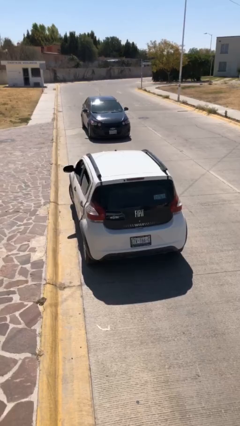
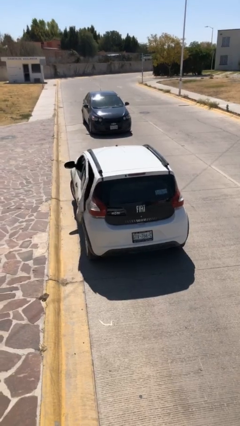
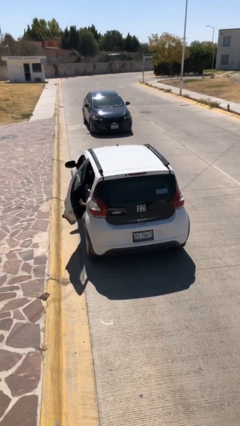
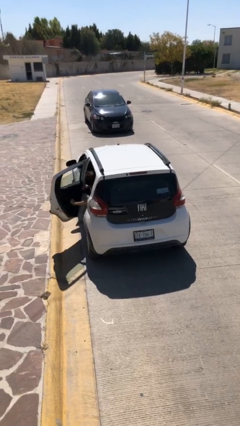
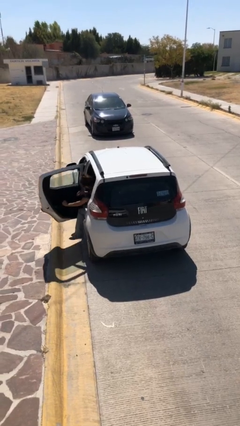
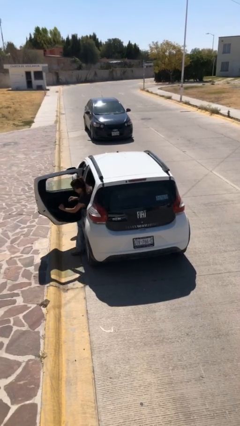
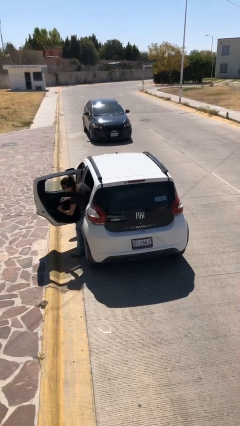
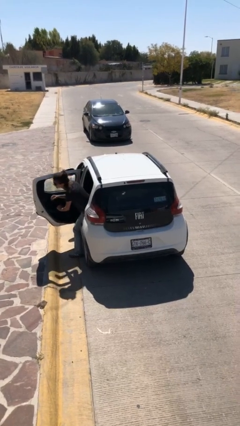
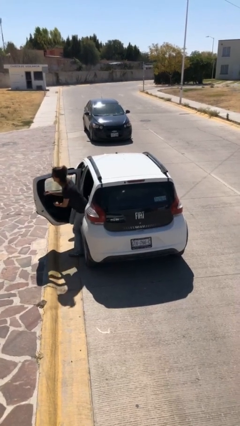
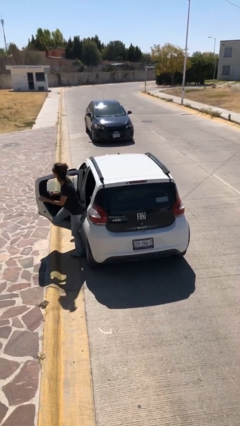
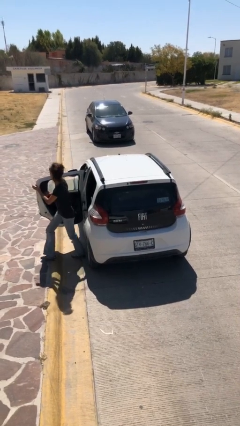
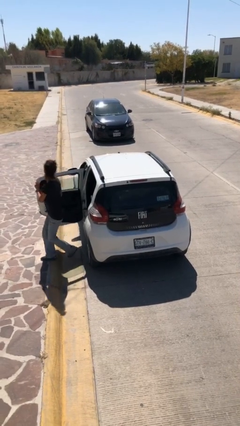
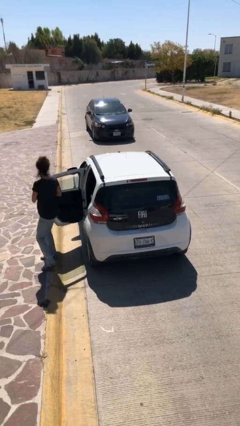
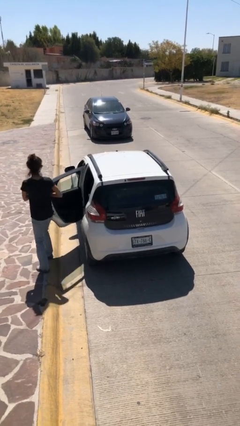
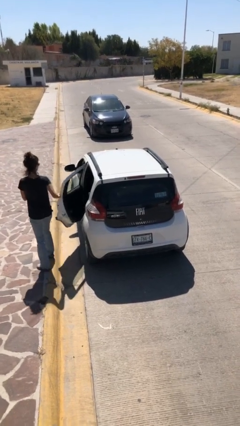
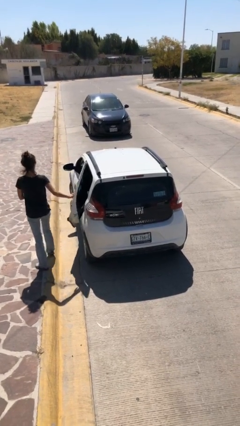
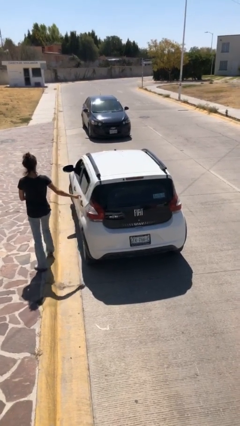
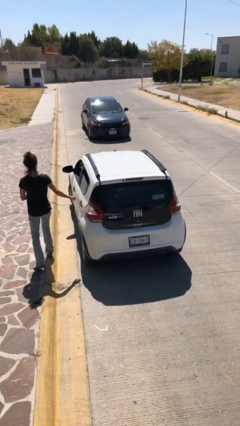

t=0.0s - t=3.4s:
car drops off person

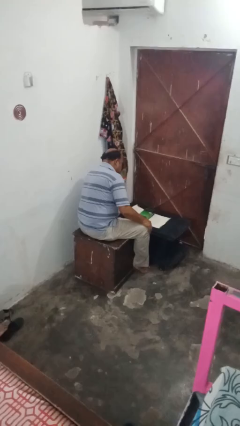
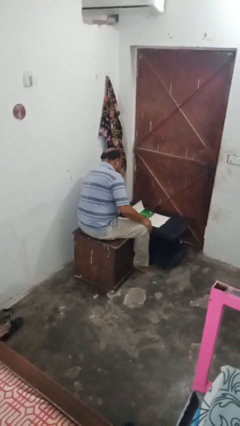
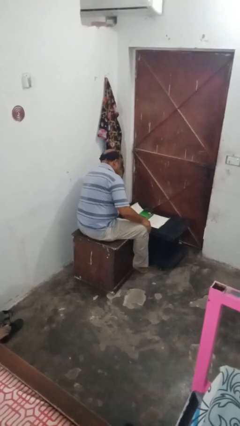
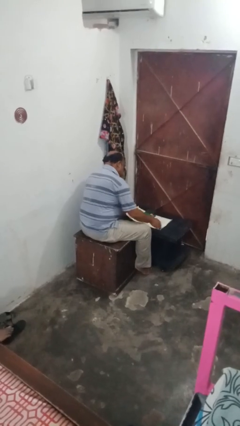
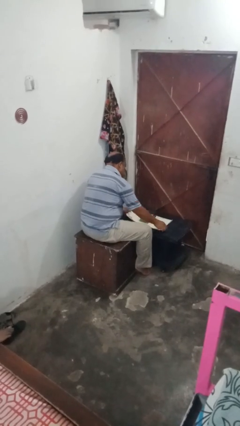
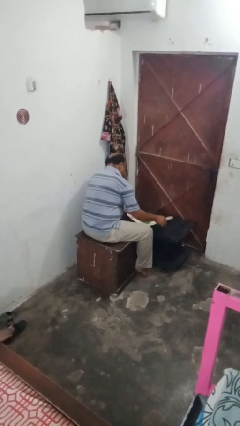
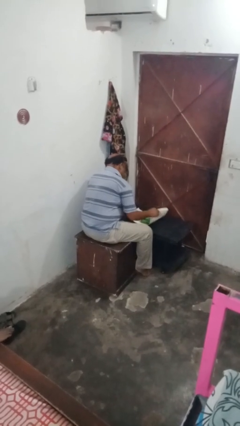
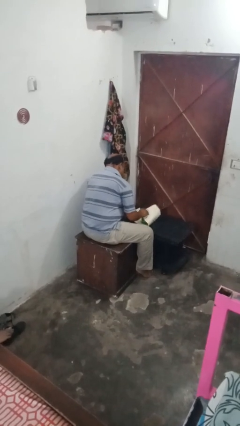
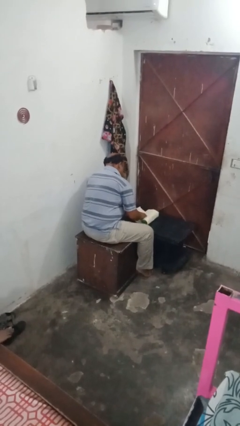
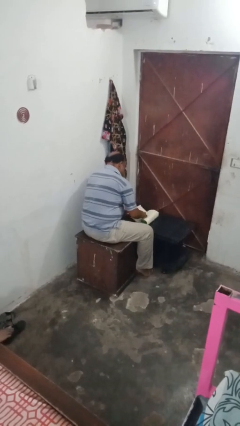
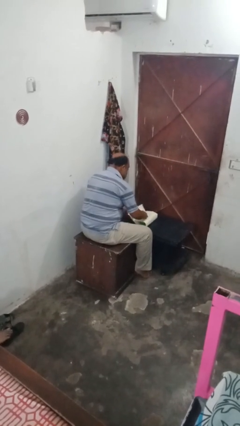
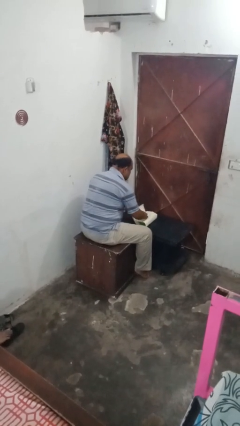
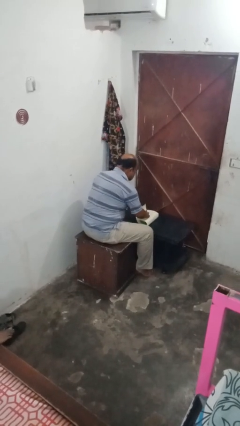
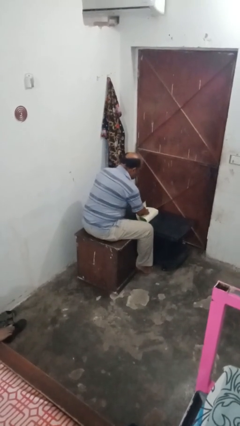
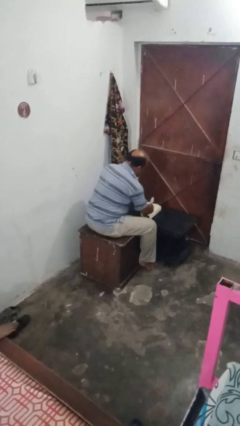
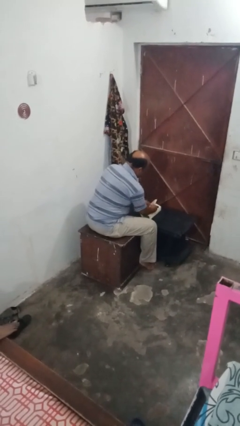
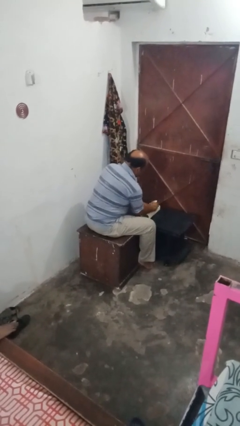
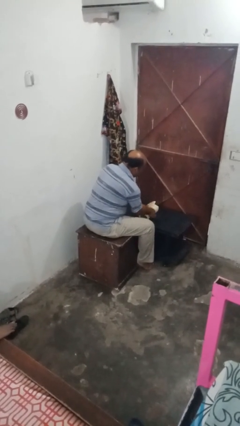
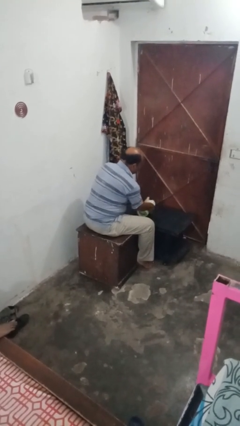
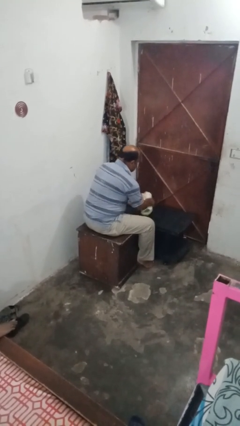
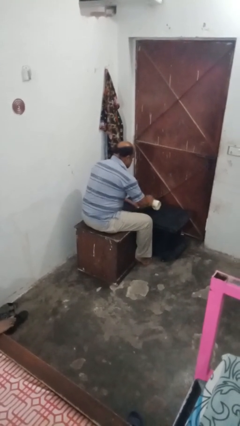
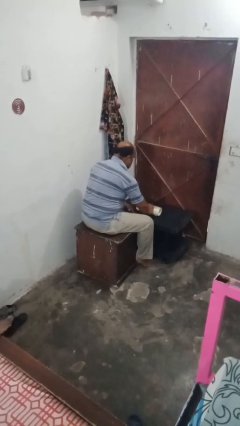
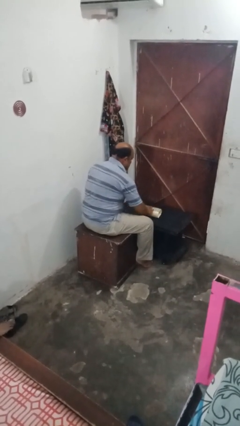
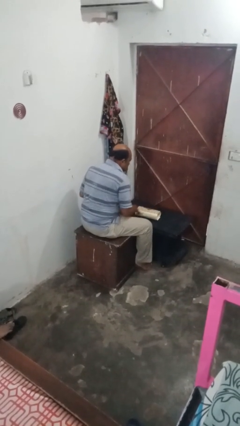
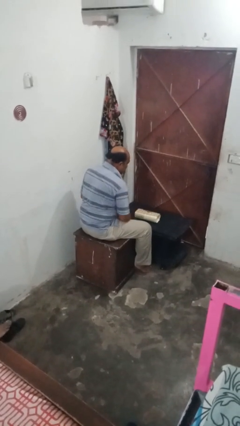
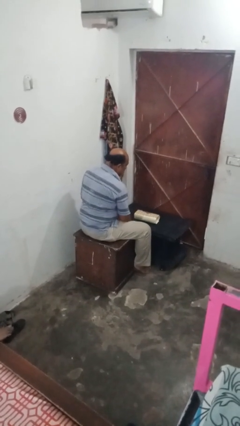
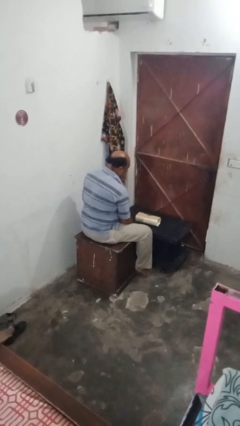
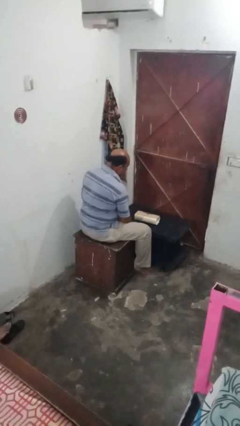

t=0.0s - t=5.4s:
person wraps box

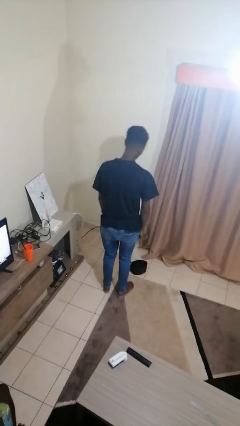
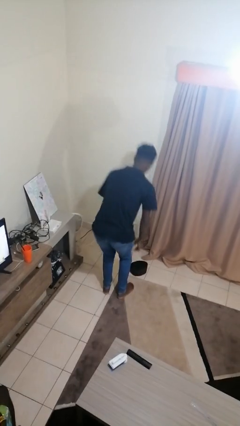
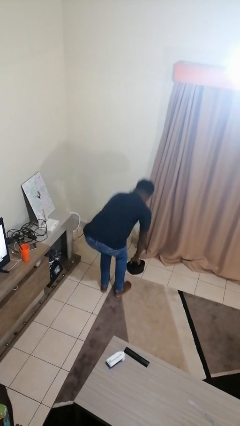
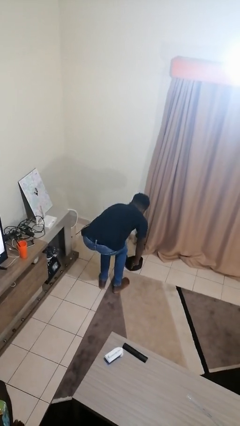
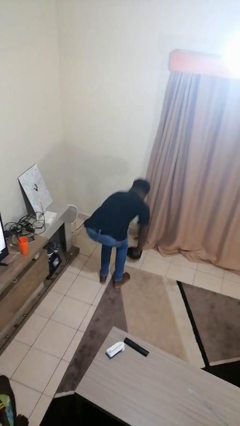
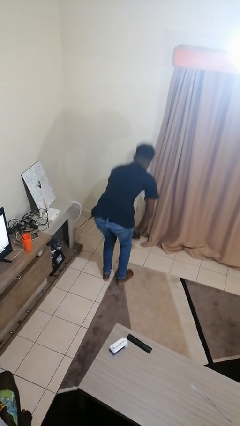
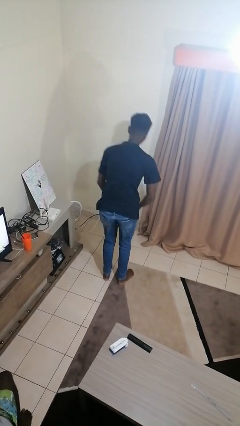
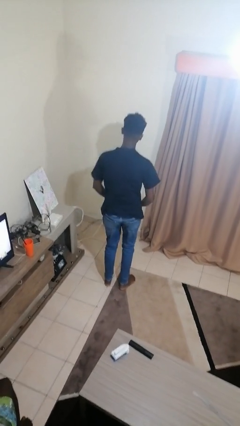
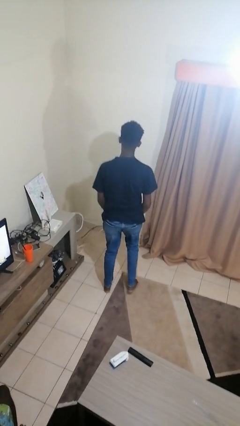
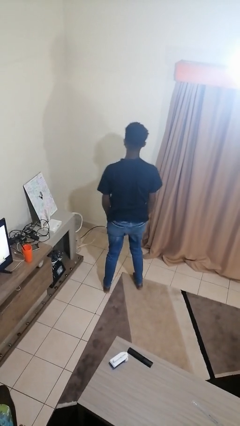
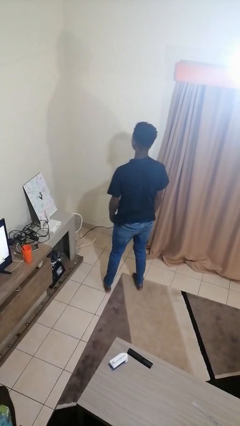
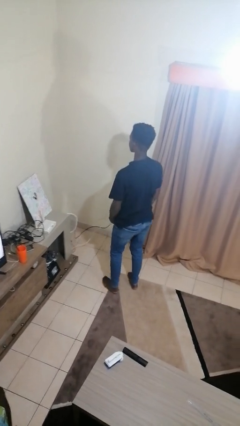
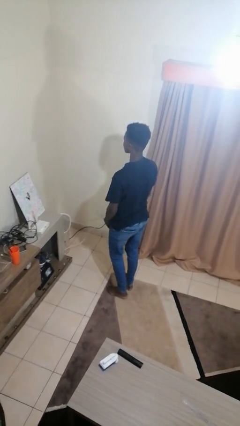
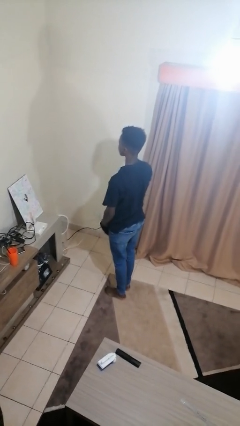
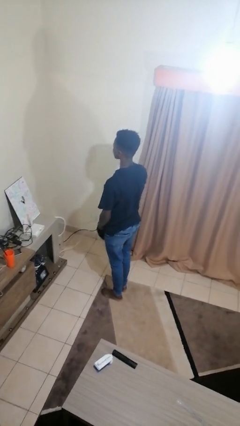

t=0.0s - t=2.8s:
person picks up object from floor

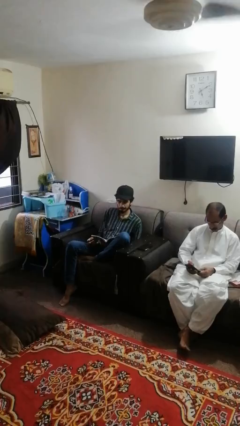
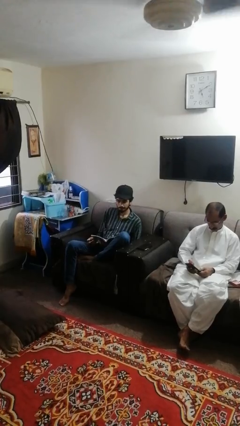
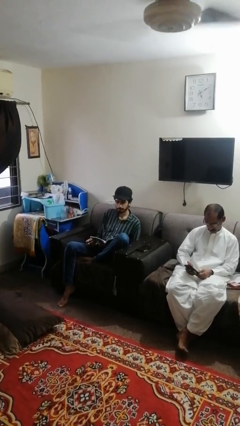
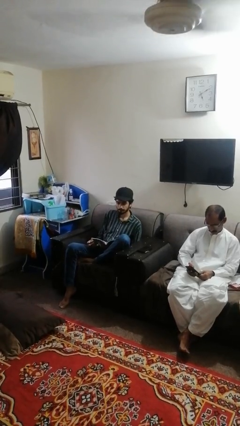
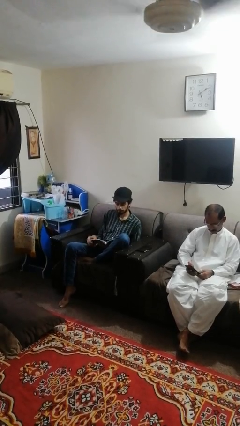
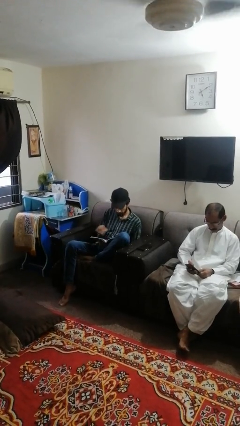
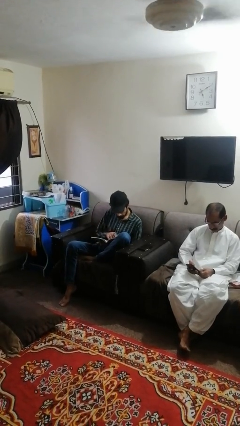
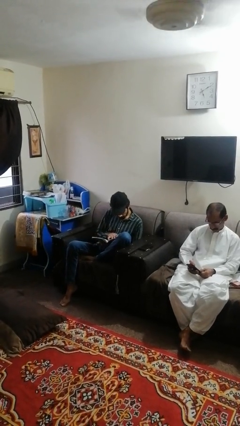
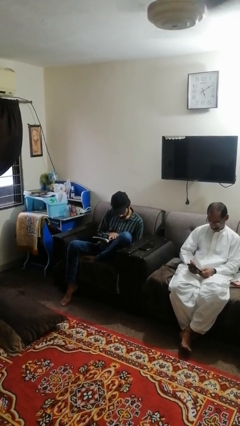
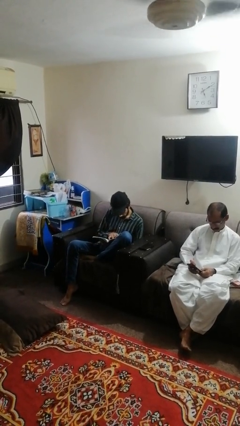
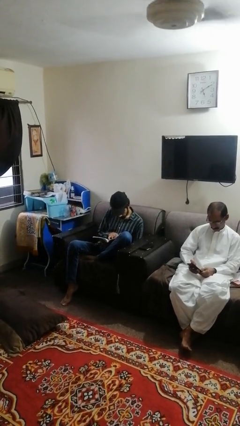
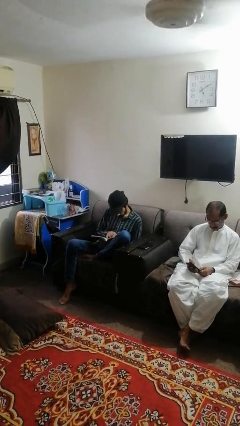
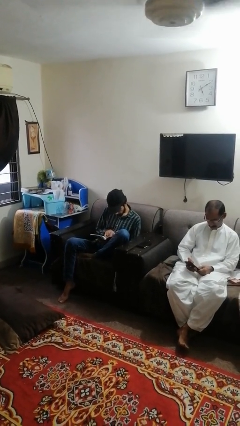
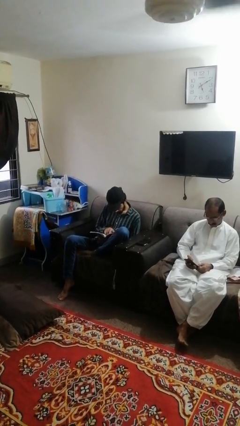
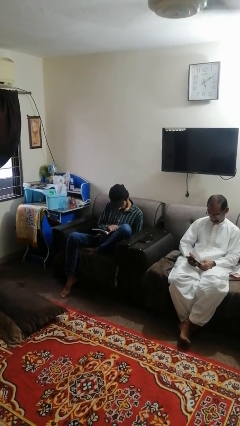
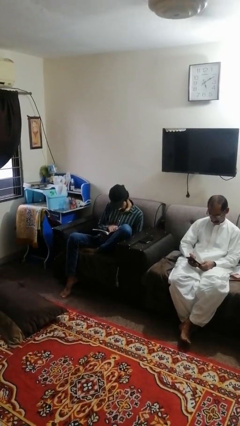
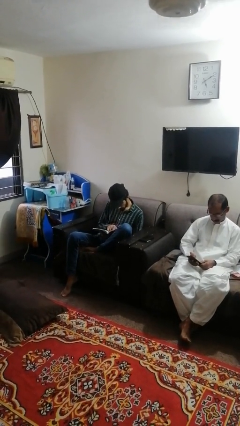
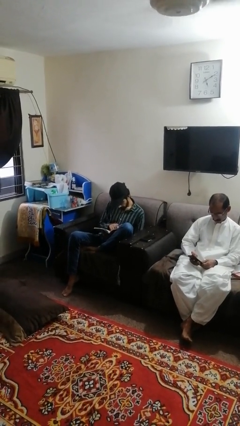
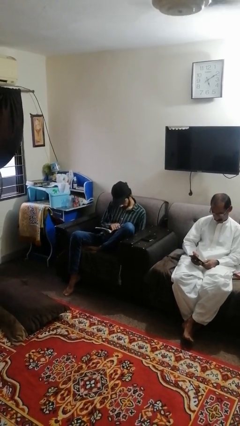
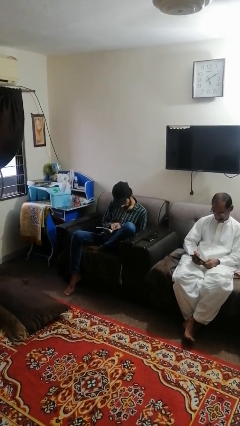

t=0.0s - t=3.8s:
person reads book

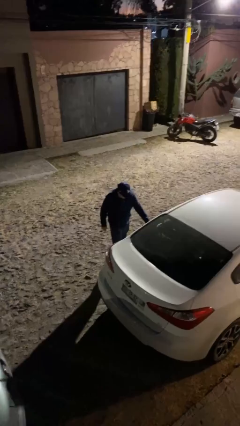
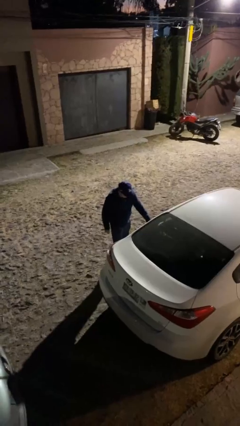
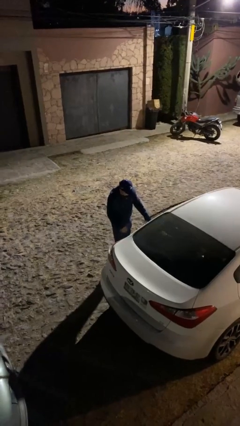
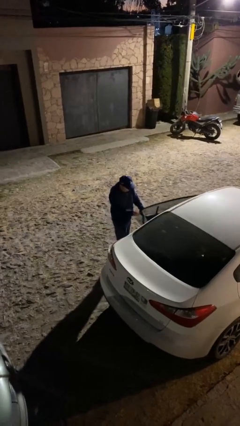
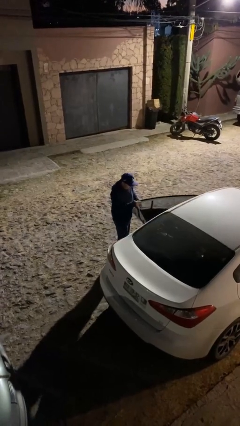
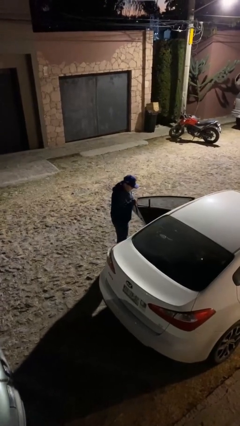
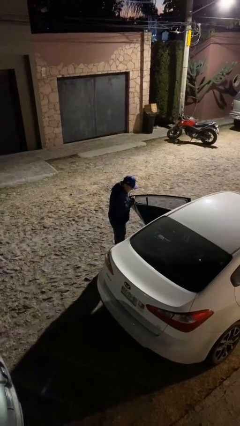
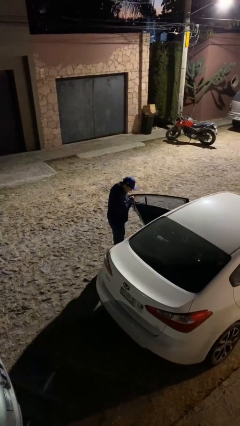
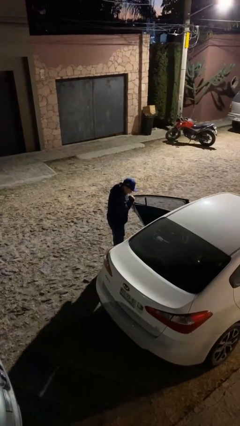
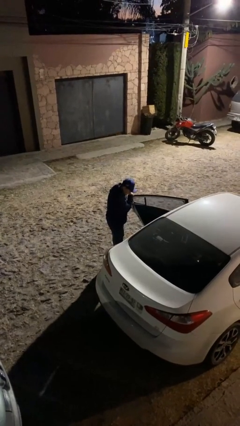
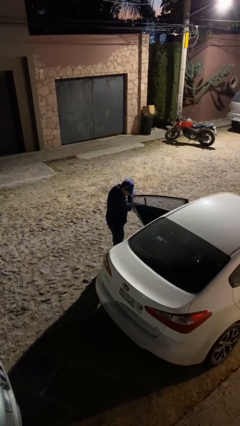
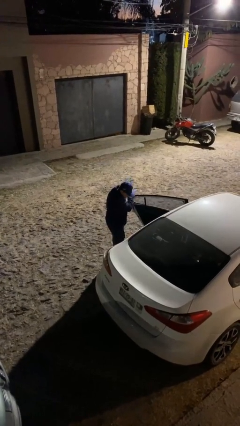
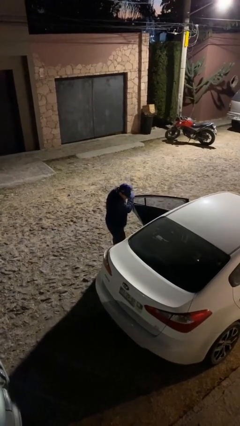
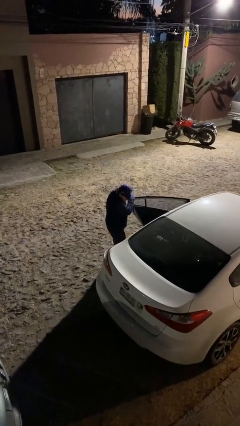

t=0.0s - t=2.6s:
person opens car door
